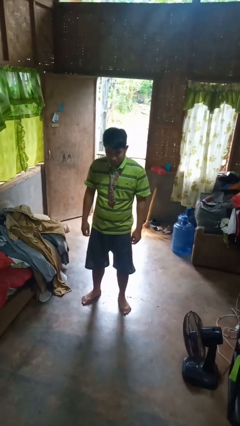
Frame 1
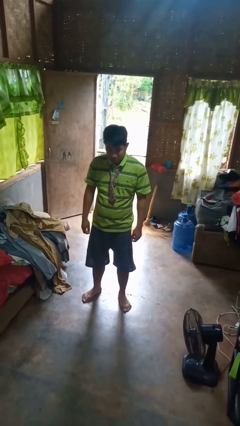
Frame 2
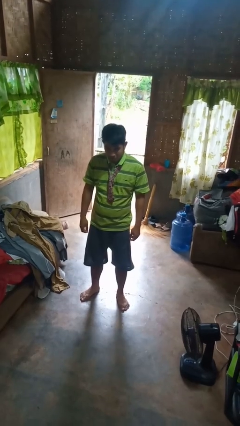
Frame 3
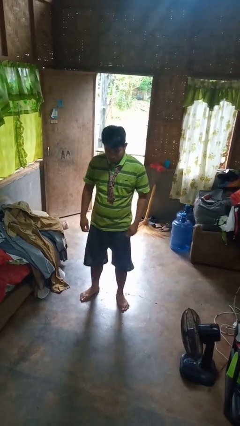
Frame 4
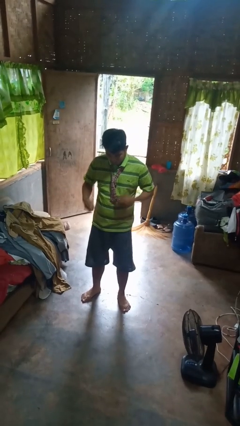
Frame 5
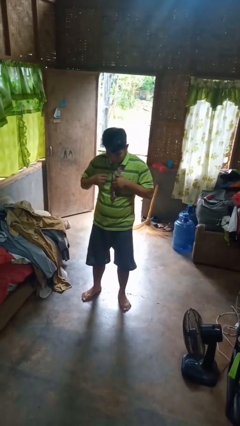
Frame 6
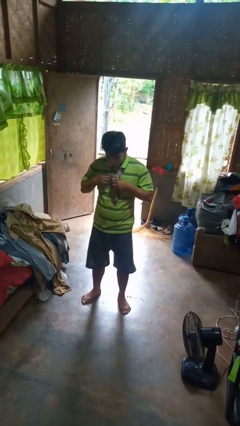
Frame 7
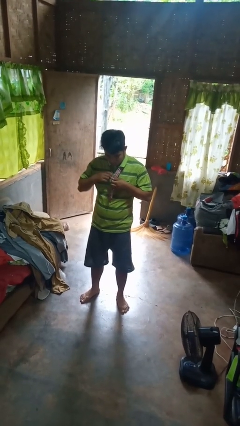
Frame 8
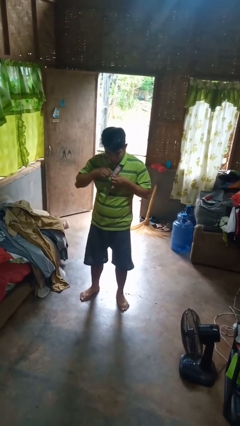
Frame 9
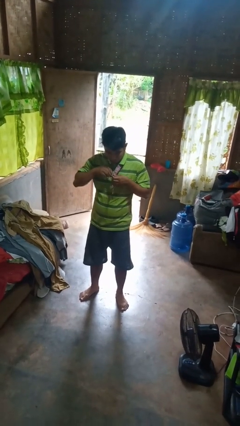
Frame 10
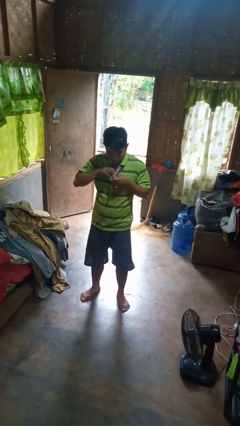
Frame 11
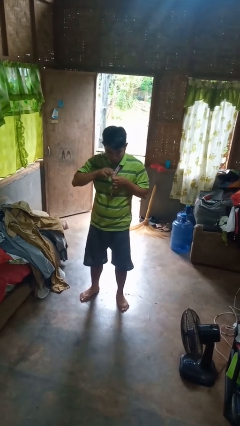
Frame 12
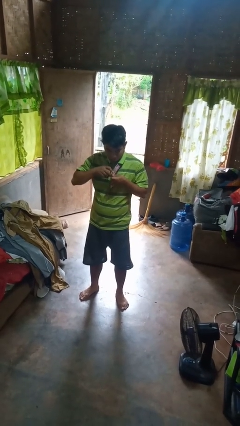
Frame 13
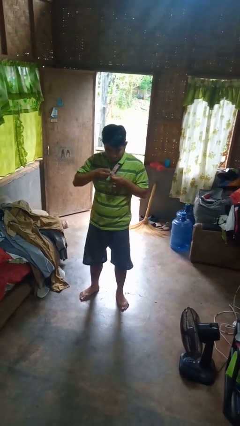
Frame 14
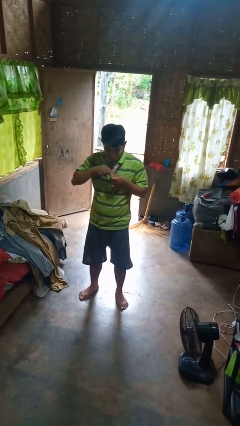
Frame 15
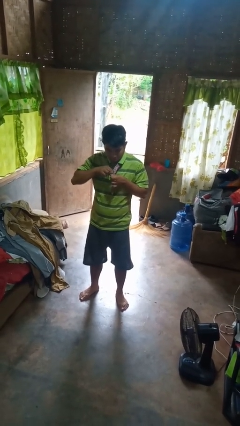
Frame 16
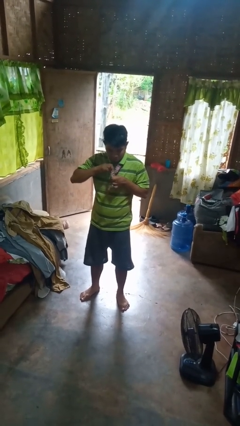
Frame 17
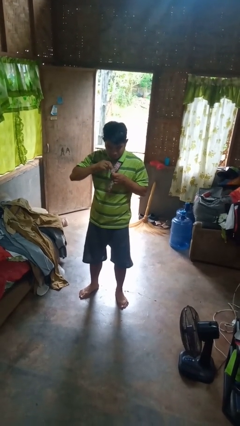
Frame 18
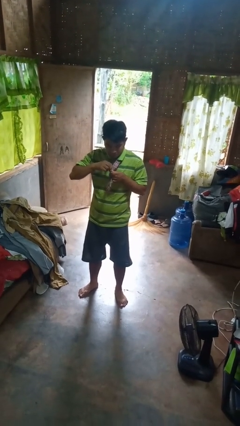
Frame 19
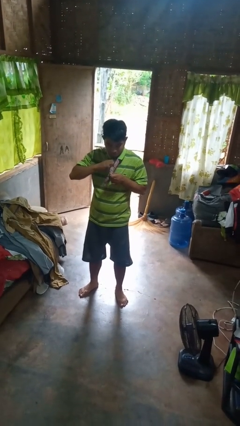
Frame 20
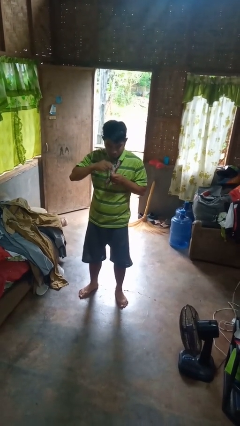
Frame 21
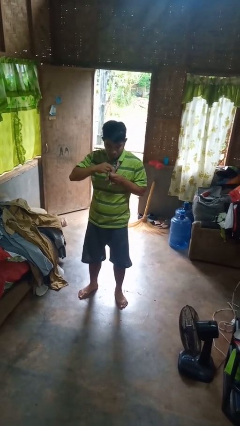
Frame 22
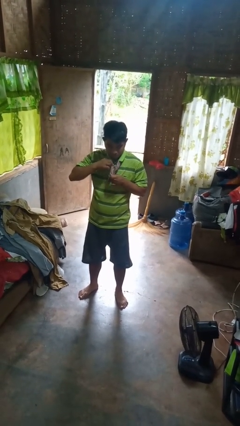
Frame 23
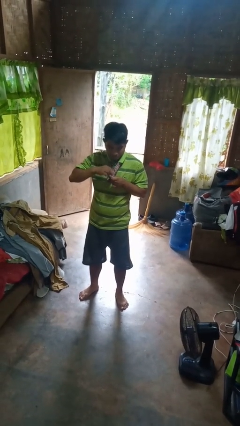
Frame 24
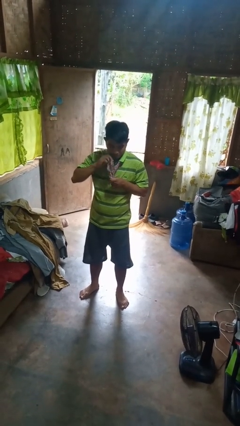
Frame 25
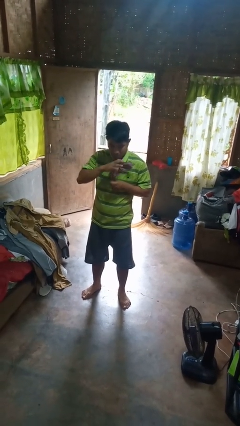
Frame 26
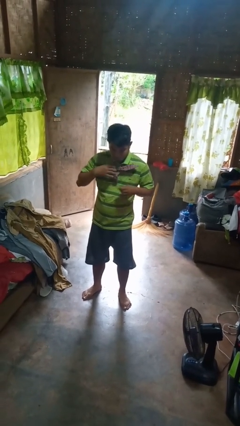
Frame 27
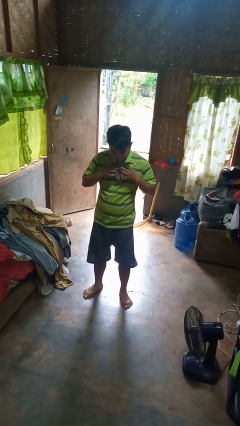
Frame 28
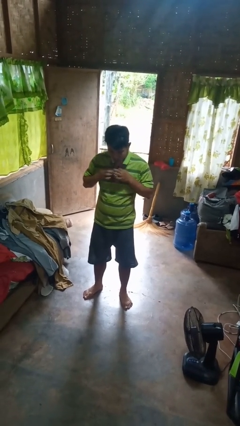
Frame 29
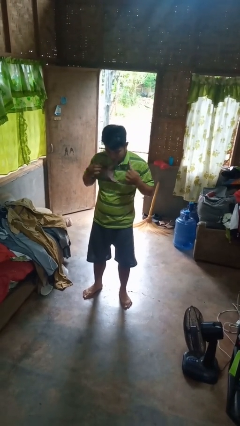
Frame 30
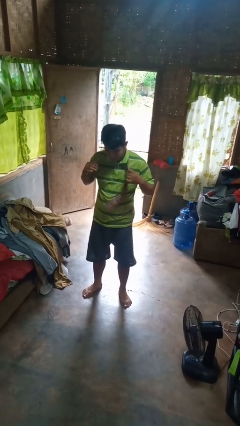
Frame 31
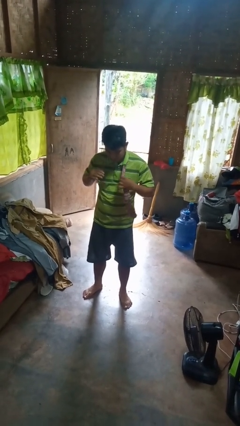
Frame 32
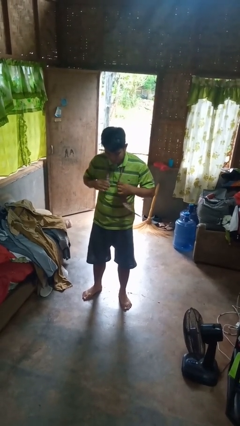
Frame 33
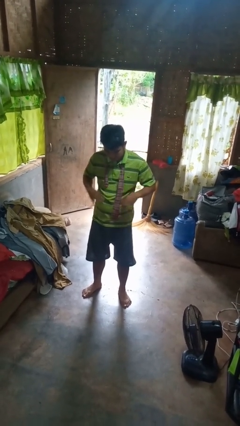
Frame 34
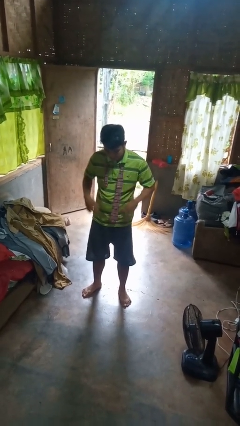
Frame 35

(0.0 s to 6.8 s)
person takes off necktie

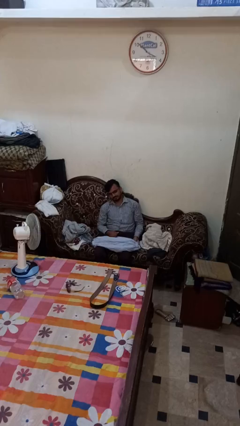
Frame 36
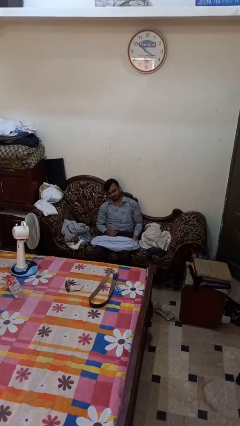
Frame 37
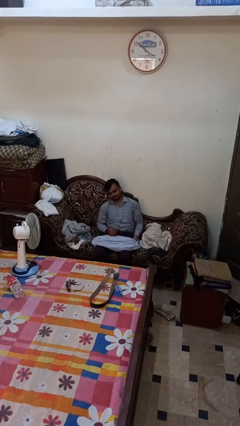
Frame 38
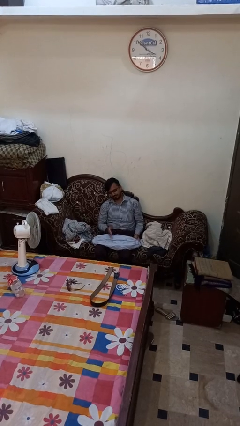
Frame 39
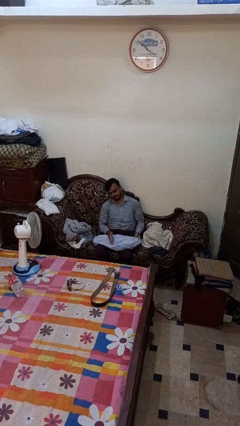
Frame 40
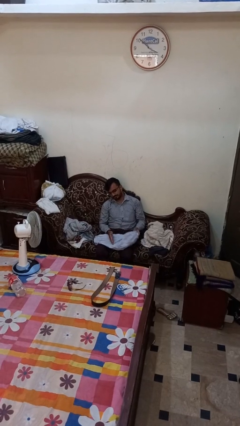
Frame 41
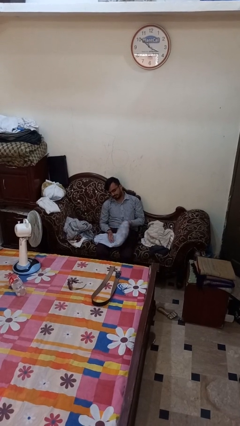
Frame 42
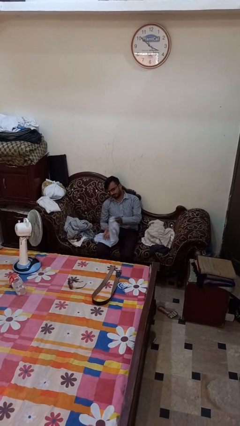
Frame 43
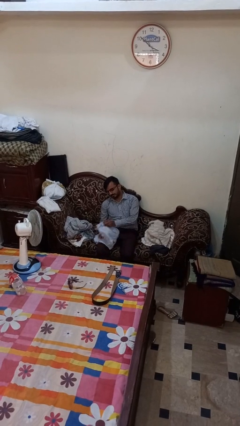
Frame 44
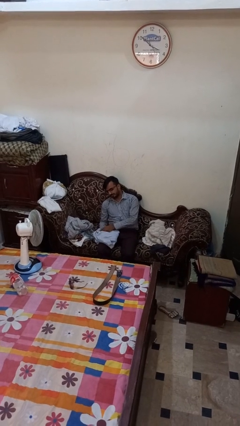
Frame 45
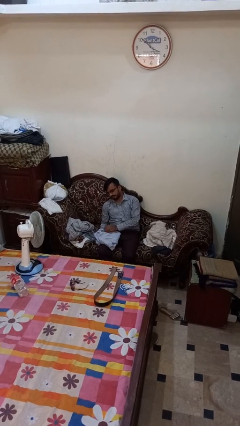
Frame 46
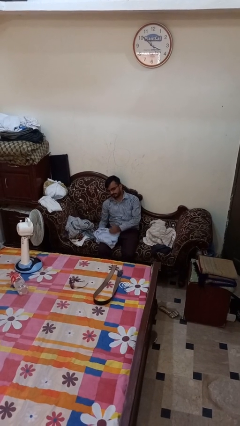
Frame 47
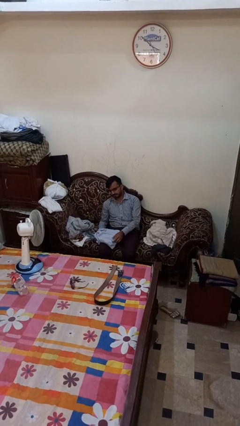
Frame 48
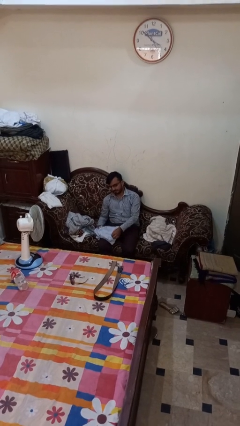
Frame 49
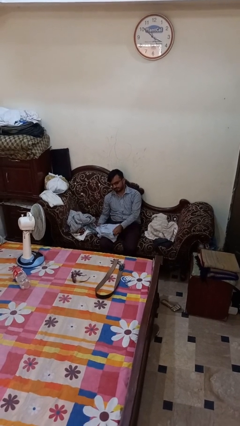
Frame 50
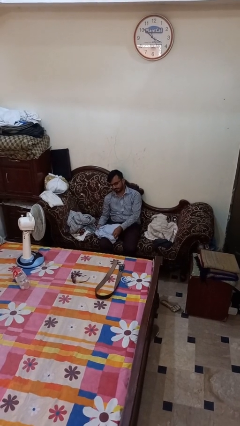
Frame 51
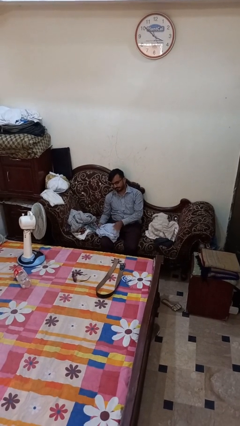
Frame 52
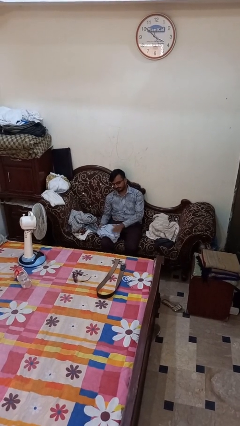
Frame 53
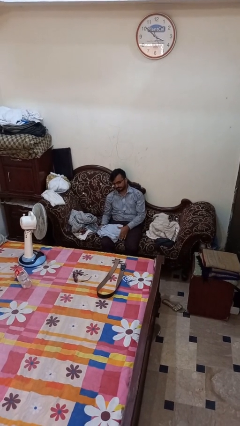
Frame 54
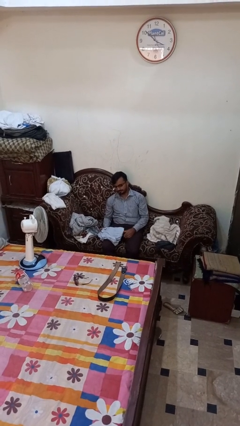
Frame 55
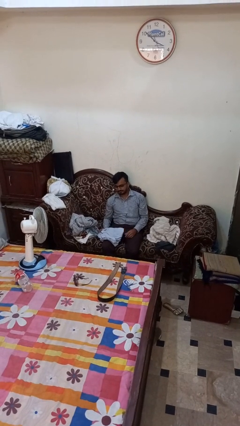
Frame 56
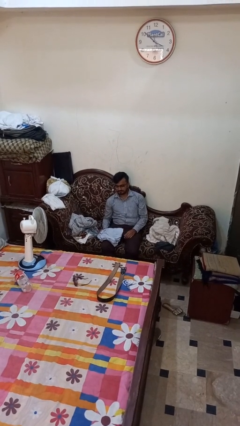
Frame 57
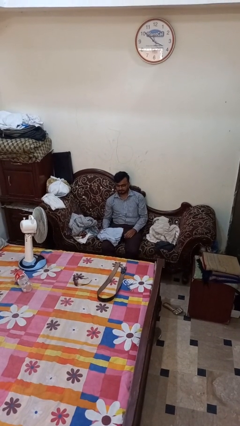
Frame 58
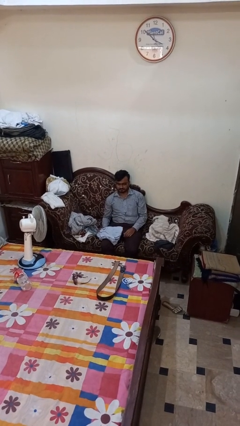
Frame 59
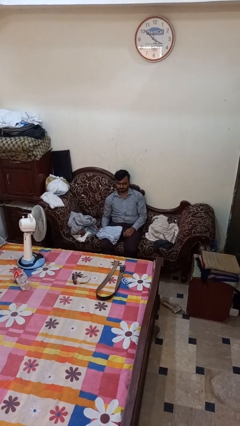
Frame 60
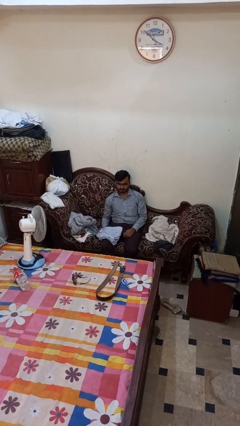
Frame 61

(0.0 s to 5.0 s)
person folds pants

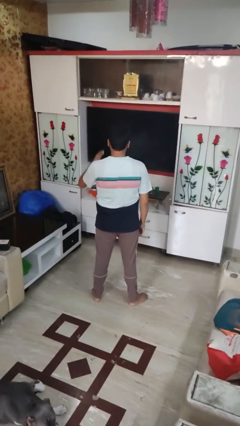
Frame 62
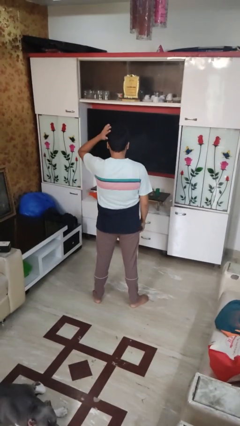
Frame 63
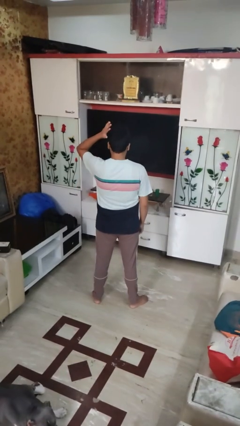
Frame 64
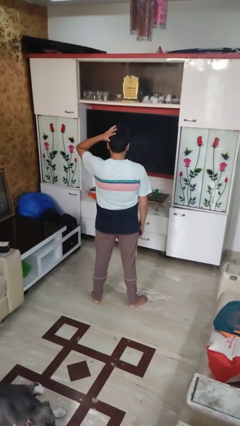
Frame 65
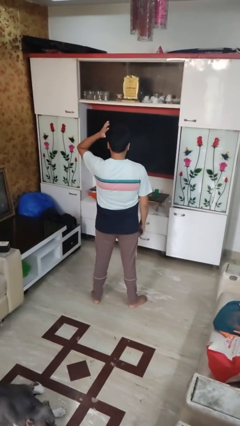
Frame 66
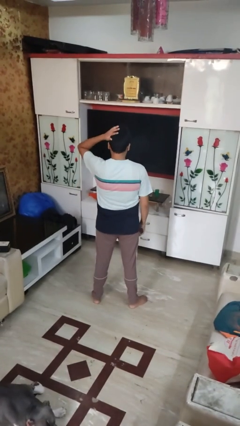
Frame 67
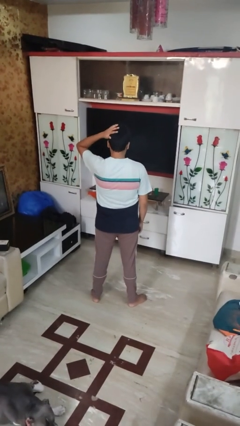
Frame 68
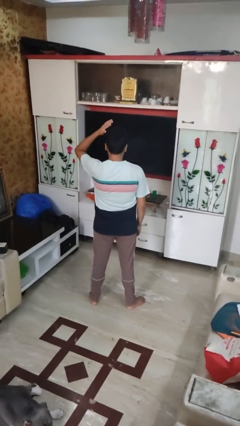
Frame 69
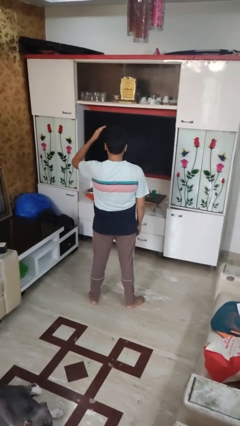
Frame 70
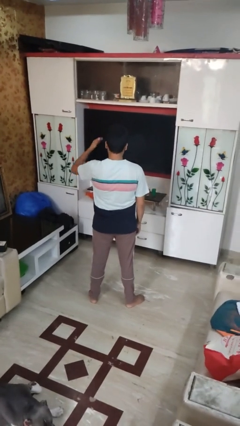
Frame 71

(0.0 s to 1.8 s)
person pats head

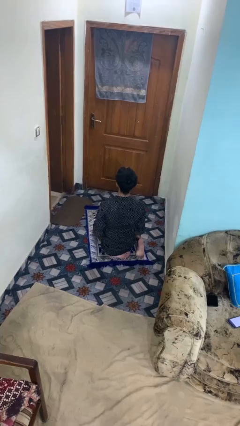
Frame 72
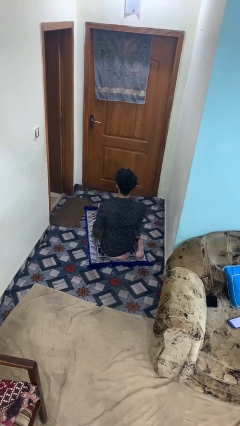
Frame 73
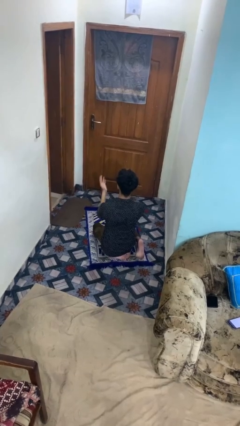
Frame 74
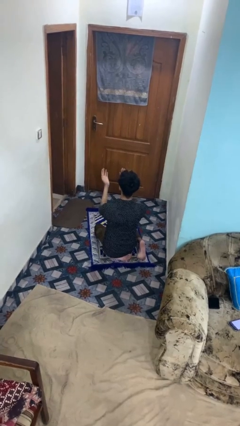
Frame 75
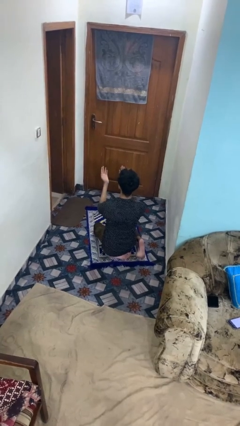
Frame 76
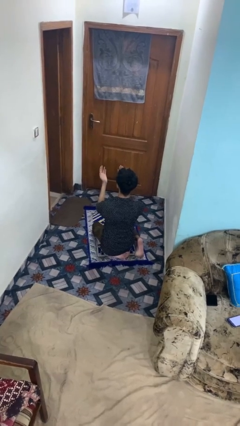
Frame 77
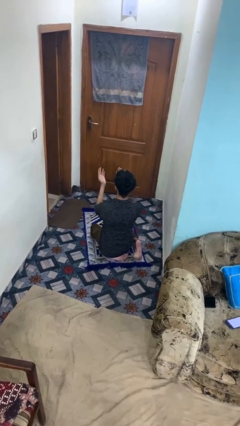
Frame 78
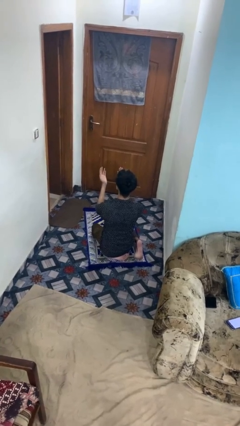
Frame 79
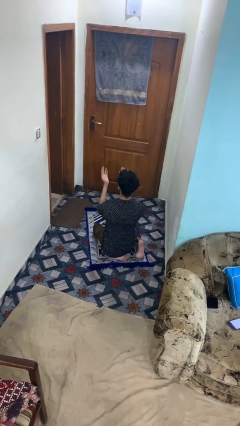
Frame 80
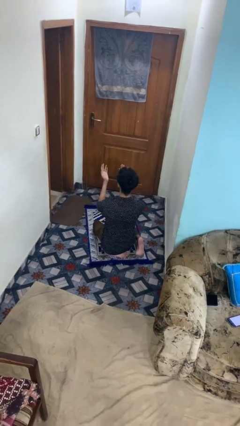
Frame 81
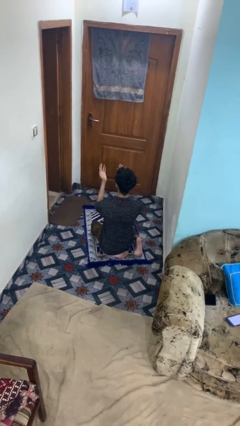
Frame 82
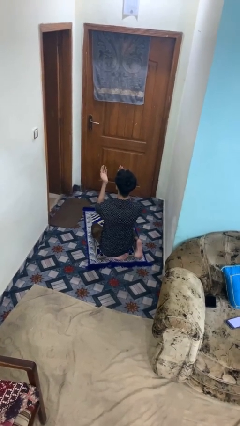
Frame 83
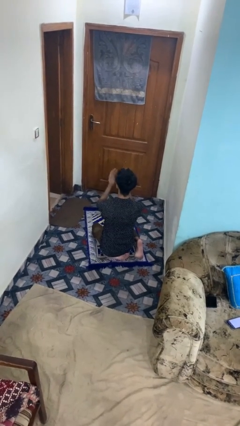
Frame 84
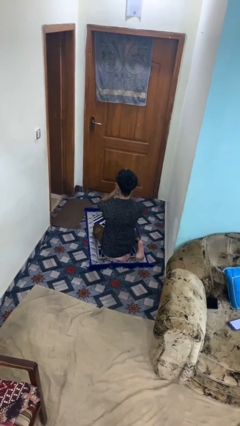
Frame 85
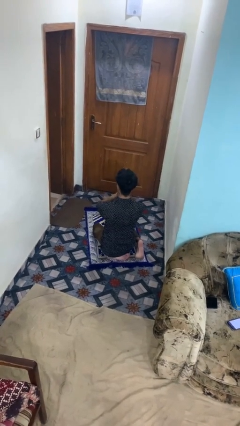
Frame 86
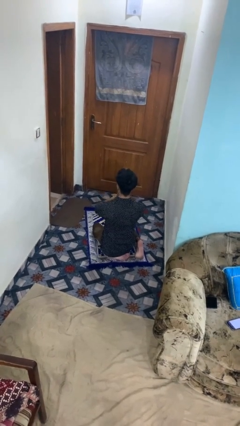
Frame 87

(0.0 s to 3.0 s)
person prays

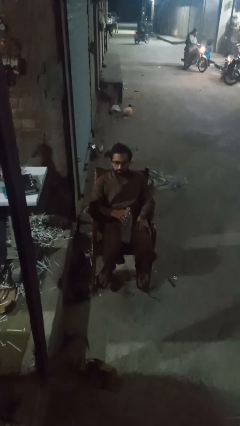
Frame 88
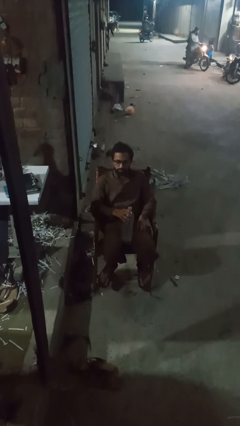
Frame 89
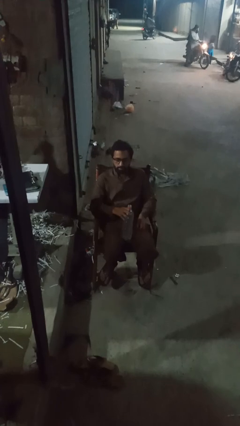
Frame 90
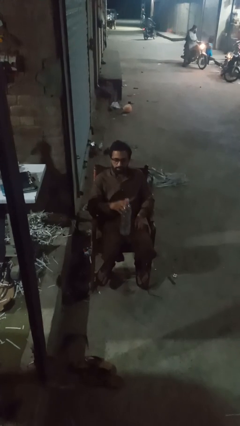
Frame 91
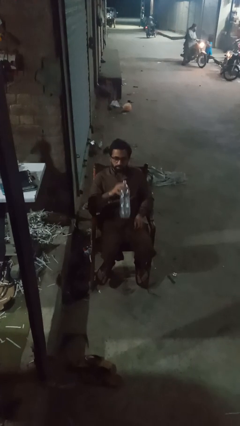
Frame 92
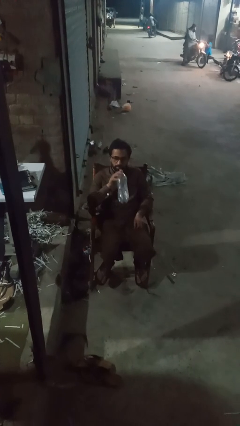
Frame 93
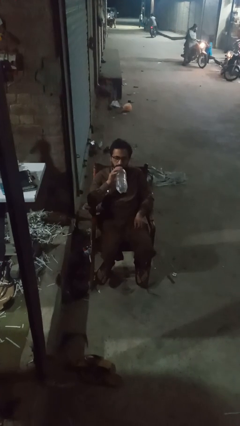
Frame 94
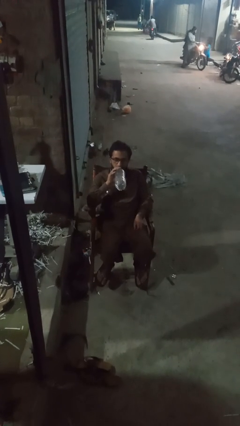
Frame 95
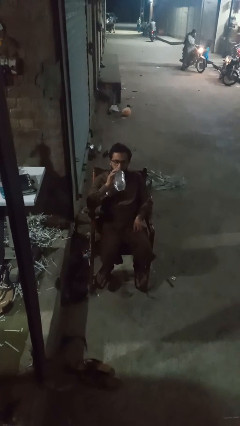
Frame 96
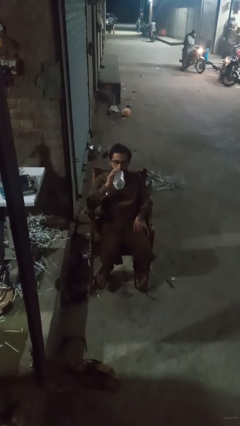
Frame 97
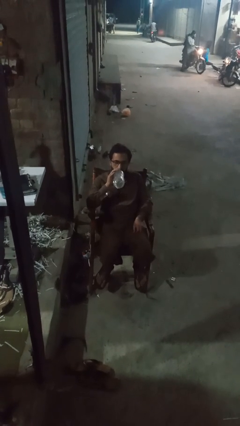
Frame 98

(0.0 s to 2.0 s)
person drinks from bottle
